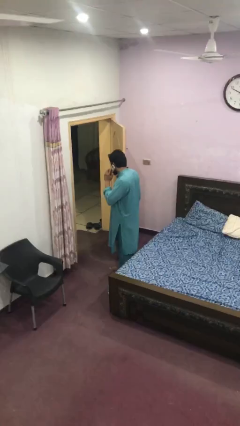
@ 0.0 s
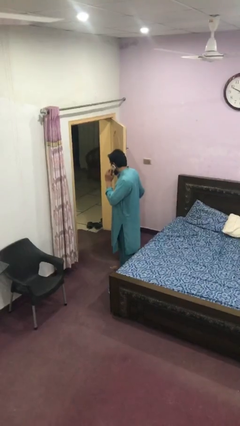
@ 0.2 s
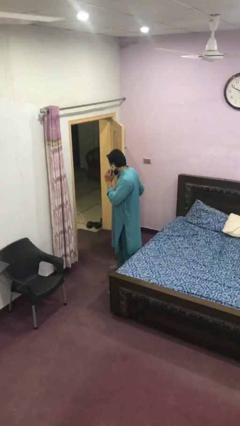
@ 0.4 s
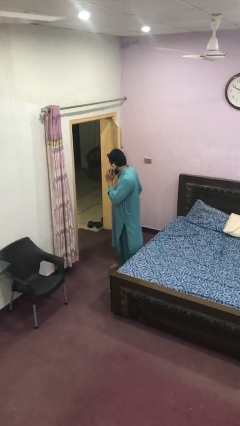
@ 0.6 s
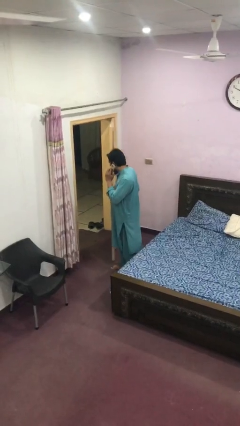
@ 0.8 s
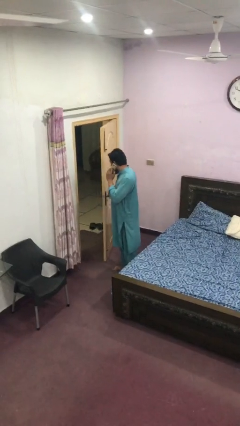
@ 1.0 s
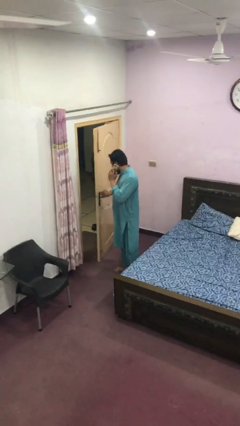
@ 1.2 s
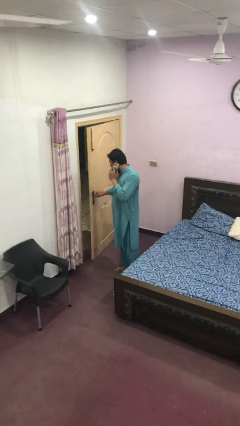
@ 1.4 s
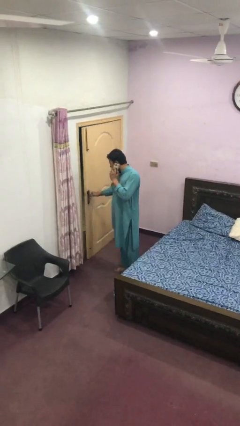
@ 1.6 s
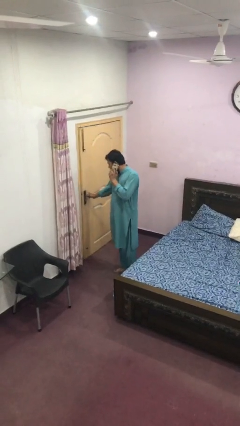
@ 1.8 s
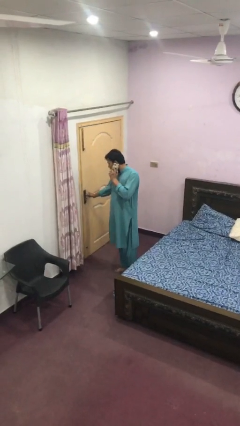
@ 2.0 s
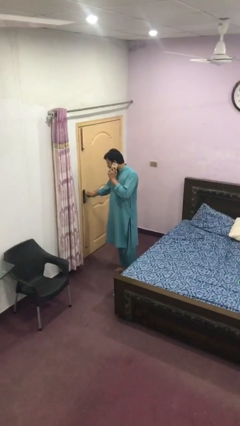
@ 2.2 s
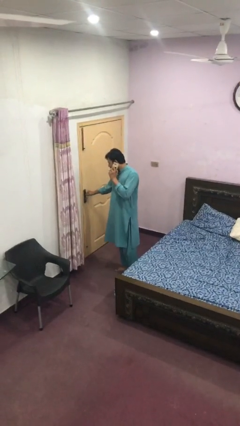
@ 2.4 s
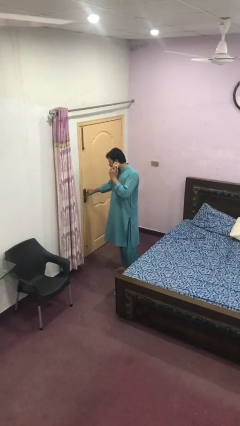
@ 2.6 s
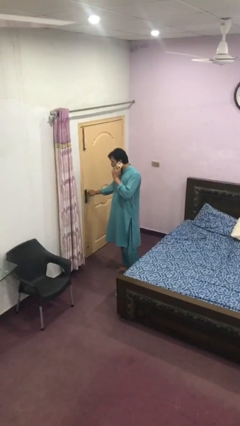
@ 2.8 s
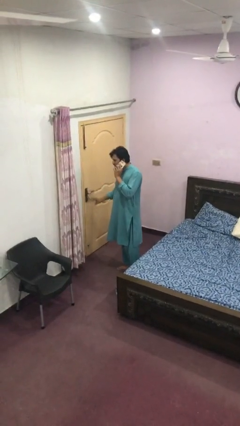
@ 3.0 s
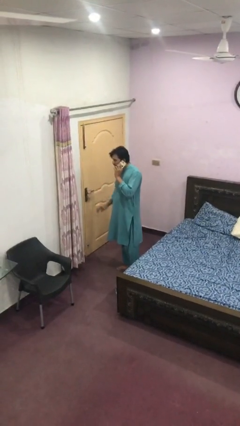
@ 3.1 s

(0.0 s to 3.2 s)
person closes facility door

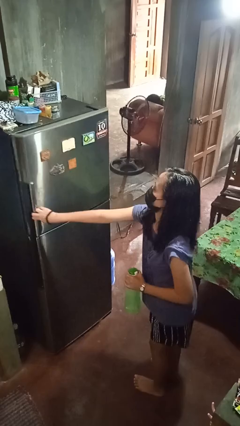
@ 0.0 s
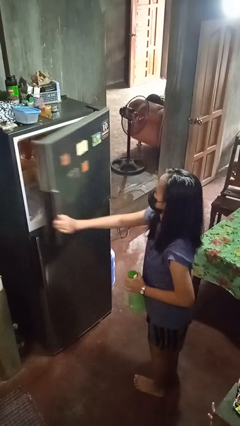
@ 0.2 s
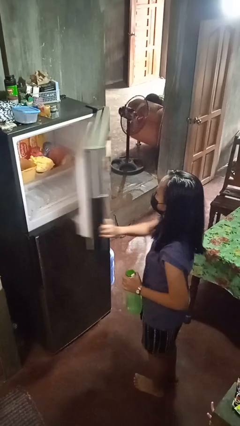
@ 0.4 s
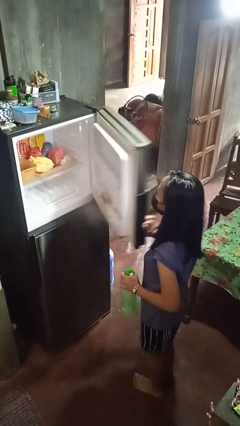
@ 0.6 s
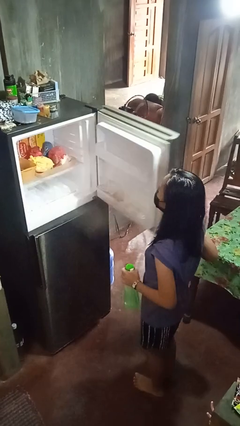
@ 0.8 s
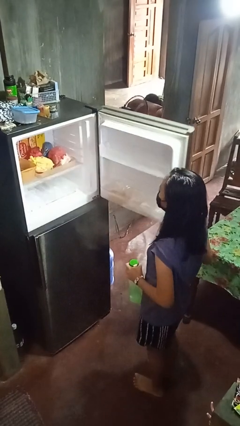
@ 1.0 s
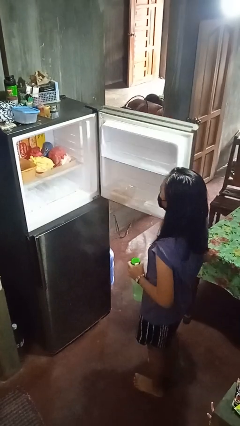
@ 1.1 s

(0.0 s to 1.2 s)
person opens refrigerator

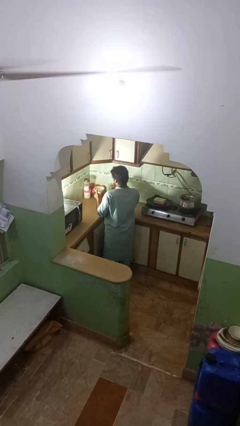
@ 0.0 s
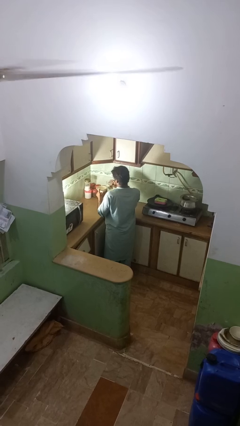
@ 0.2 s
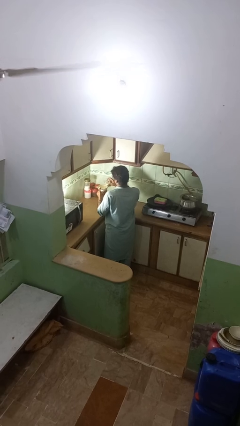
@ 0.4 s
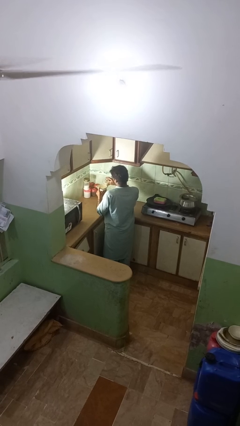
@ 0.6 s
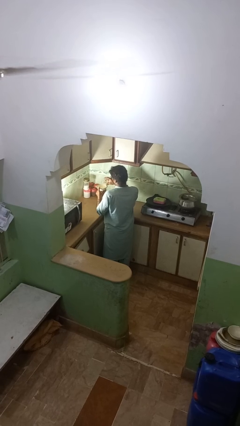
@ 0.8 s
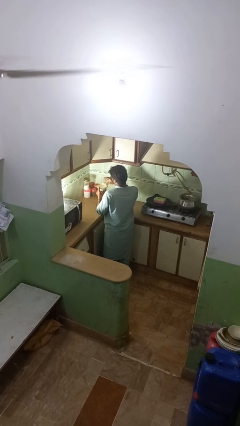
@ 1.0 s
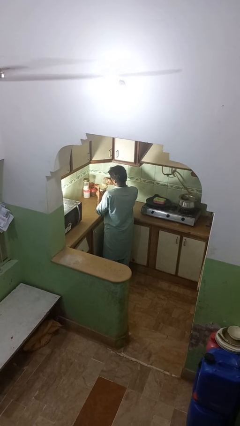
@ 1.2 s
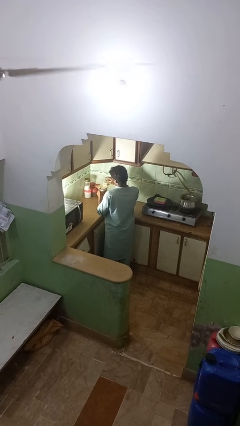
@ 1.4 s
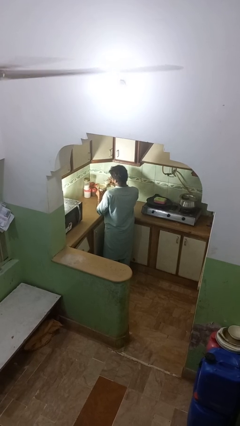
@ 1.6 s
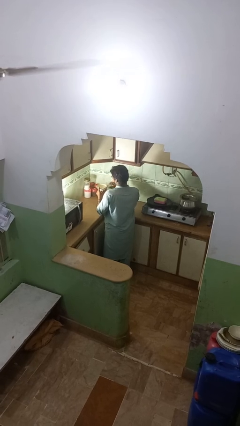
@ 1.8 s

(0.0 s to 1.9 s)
person pours into bowl

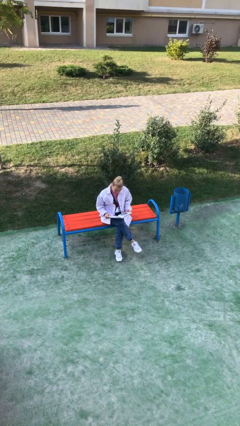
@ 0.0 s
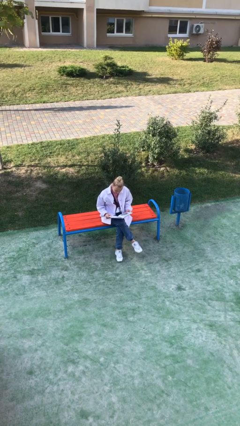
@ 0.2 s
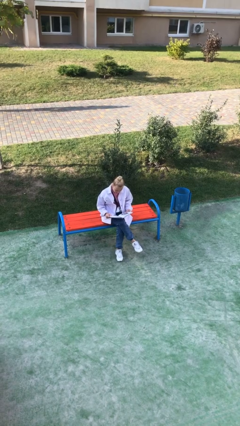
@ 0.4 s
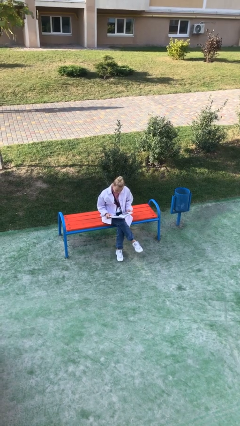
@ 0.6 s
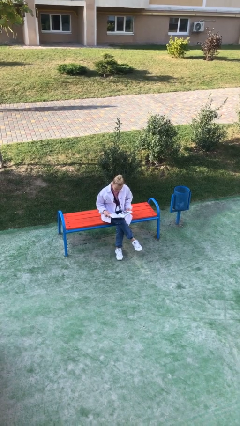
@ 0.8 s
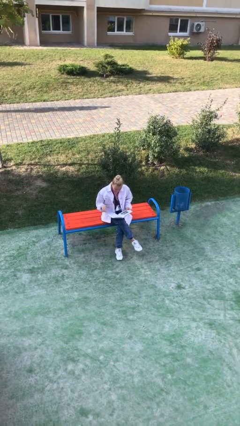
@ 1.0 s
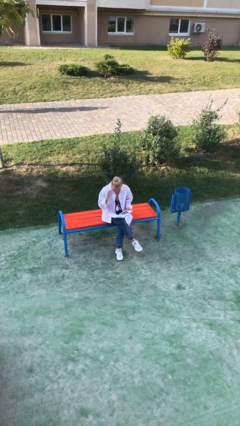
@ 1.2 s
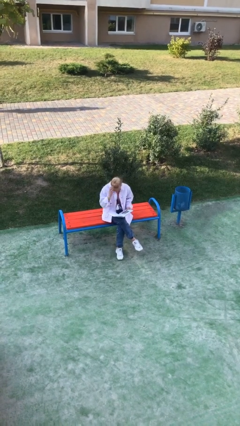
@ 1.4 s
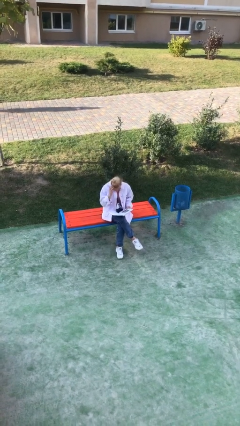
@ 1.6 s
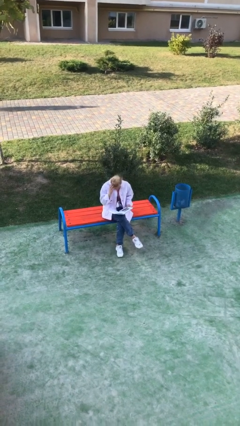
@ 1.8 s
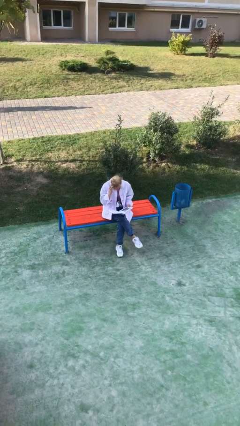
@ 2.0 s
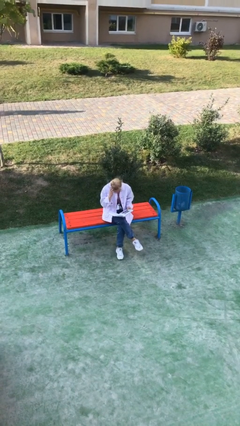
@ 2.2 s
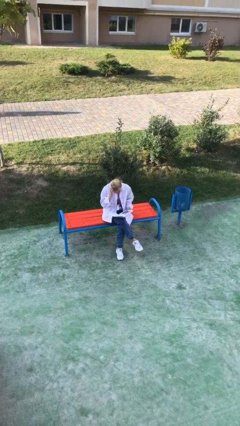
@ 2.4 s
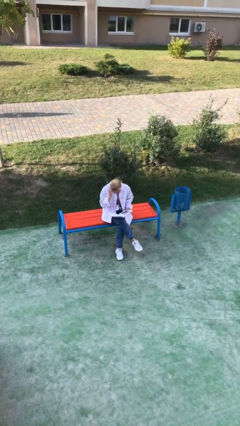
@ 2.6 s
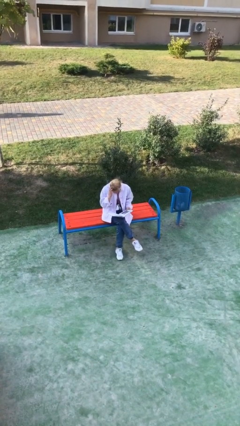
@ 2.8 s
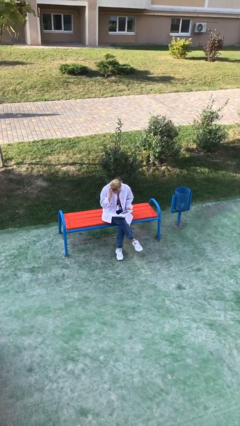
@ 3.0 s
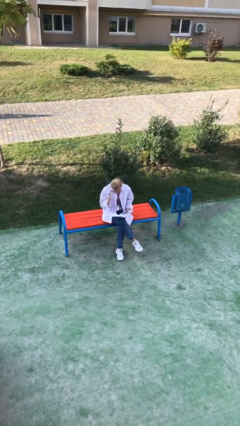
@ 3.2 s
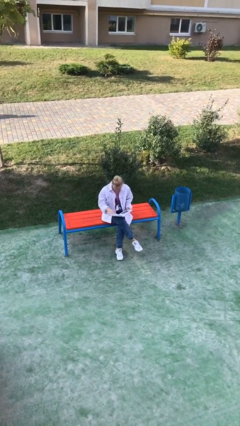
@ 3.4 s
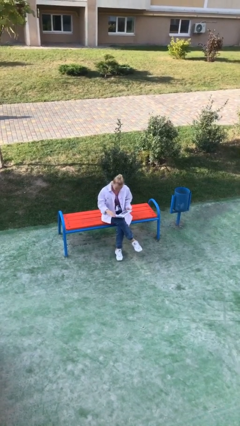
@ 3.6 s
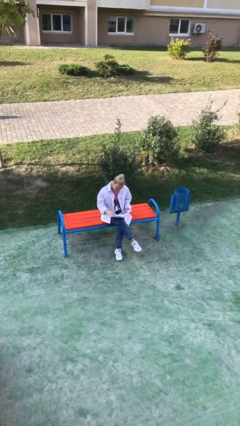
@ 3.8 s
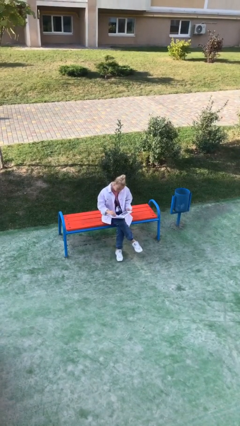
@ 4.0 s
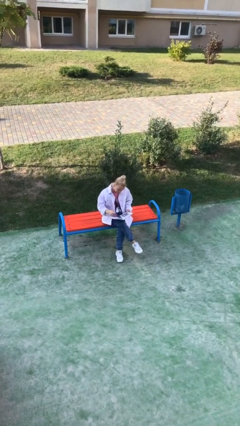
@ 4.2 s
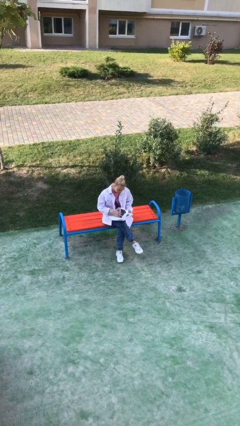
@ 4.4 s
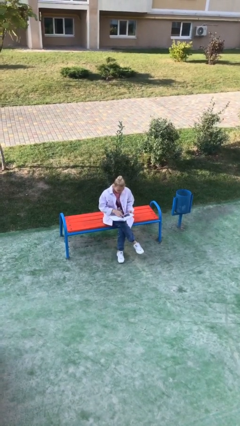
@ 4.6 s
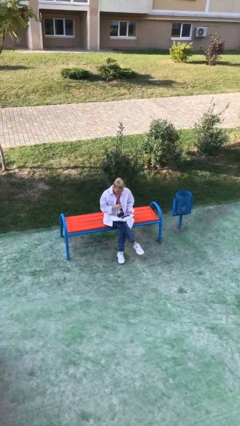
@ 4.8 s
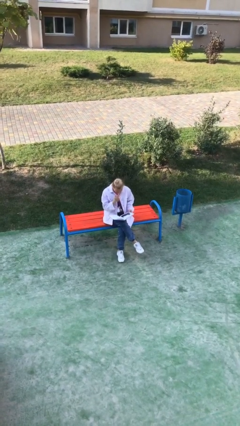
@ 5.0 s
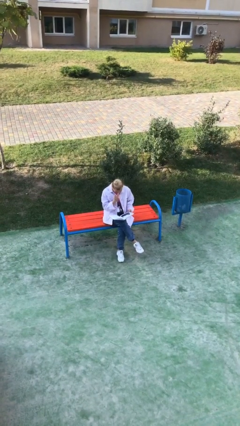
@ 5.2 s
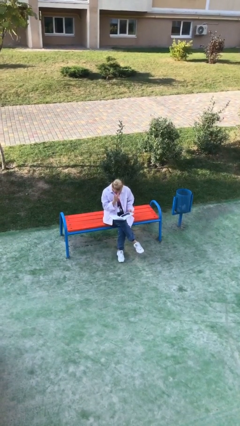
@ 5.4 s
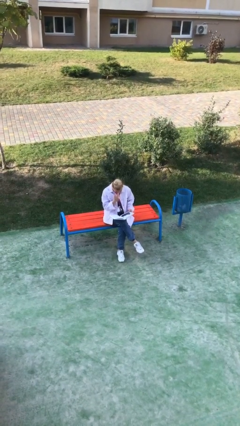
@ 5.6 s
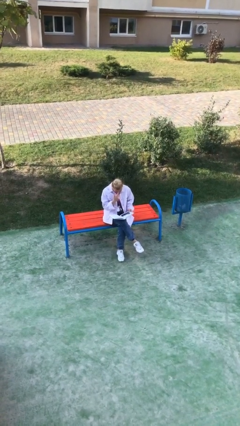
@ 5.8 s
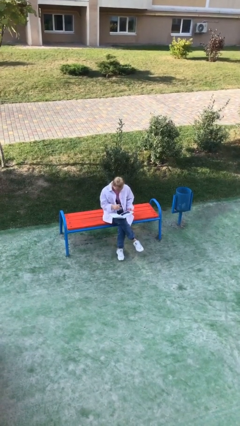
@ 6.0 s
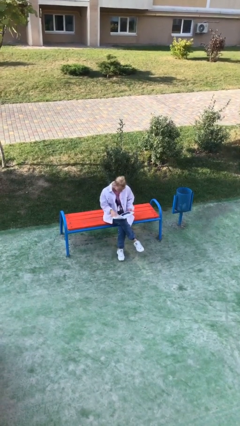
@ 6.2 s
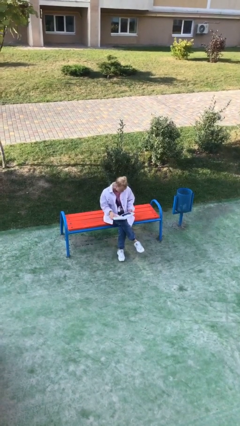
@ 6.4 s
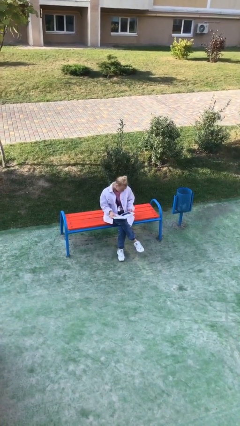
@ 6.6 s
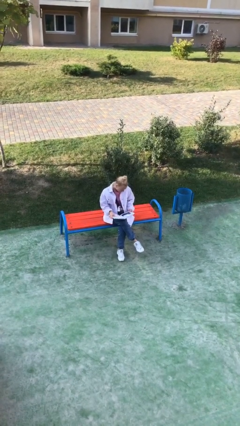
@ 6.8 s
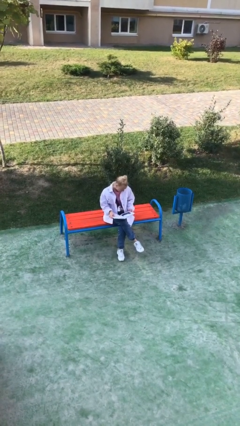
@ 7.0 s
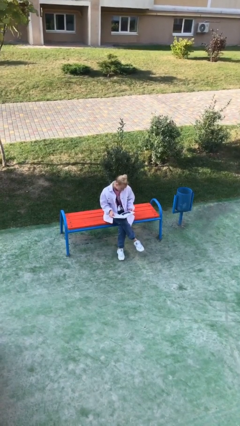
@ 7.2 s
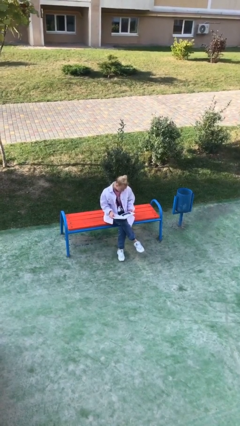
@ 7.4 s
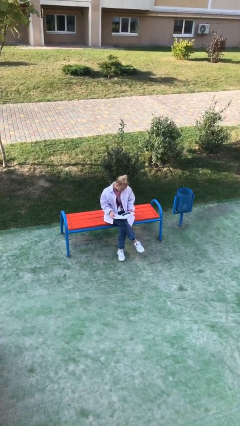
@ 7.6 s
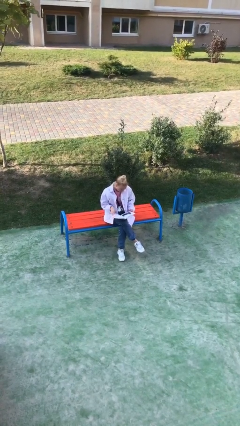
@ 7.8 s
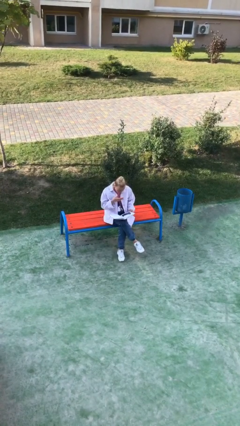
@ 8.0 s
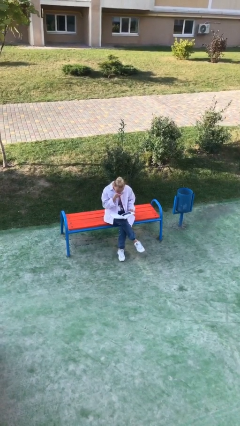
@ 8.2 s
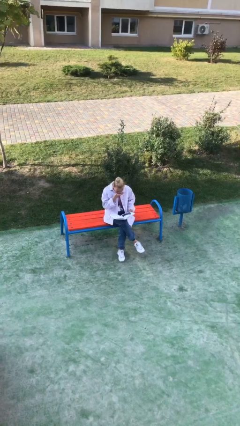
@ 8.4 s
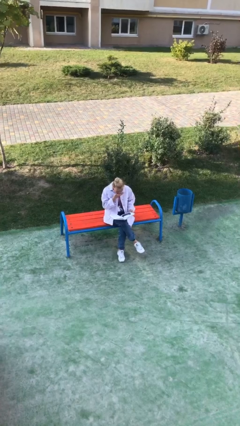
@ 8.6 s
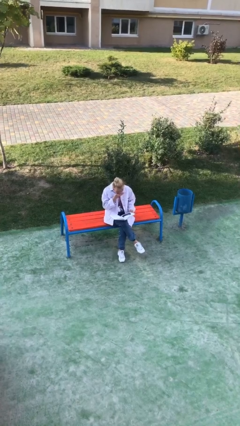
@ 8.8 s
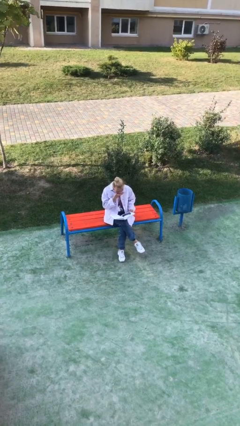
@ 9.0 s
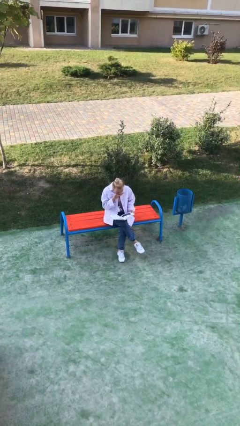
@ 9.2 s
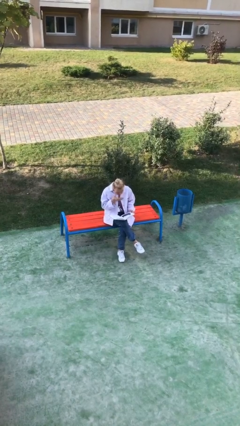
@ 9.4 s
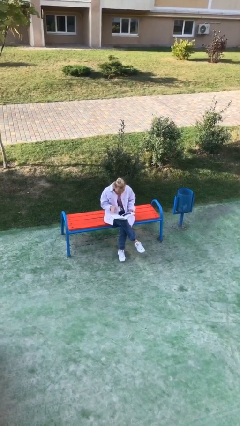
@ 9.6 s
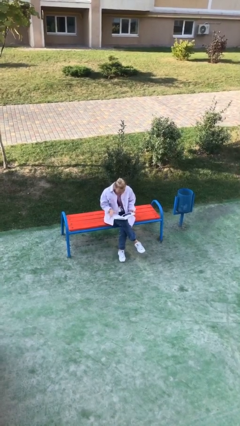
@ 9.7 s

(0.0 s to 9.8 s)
person reads document

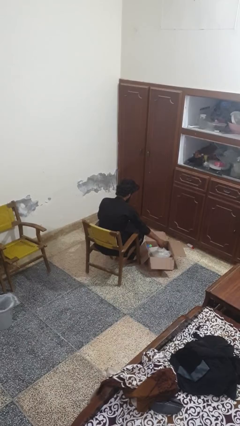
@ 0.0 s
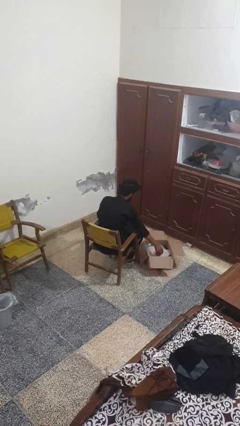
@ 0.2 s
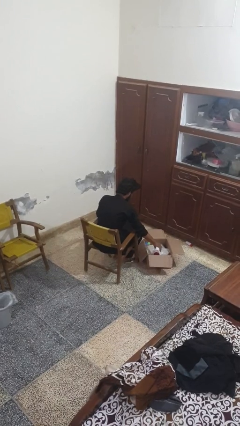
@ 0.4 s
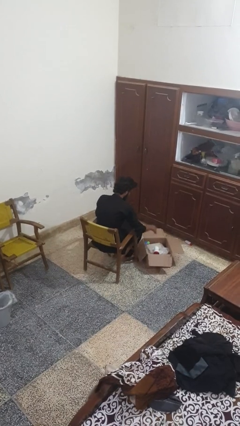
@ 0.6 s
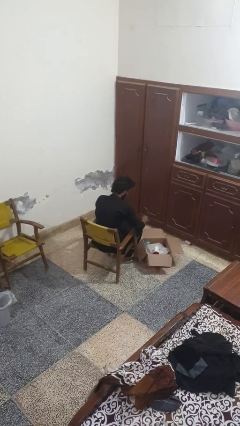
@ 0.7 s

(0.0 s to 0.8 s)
person puts object into box

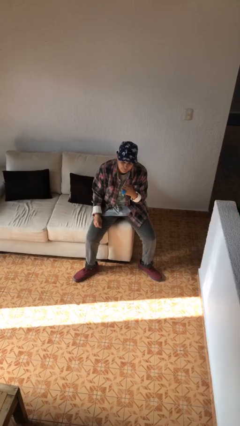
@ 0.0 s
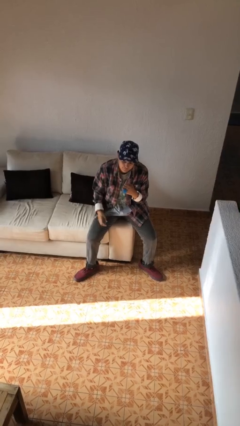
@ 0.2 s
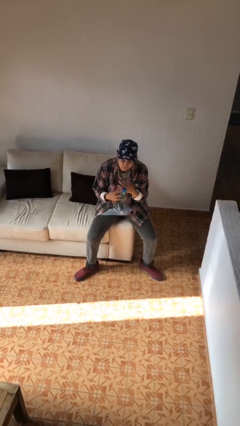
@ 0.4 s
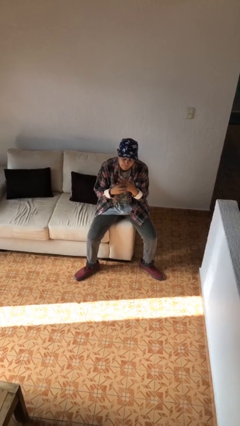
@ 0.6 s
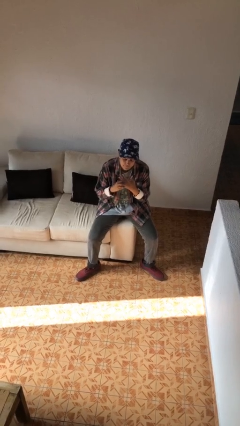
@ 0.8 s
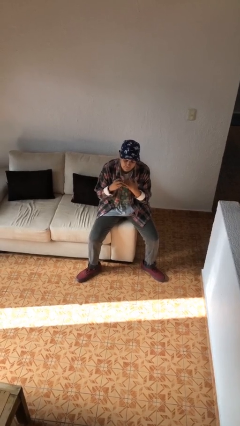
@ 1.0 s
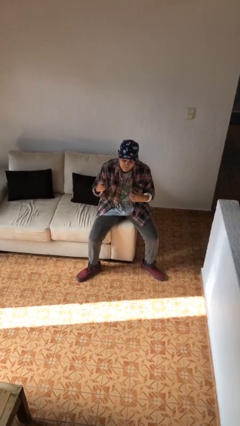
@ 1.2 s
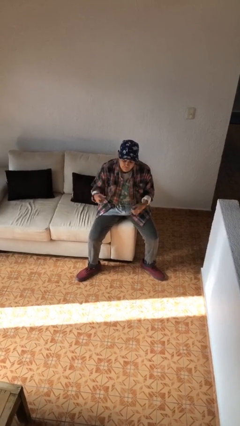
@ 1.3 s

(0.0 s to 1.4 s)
person takes off ring
